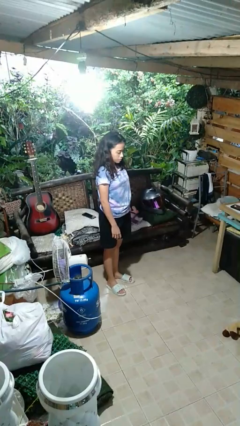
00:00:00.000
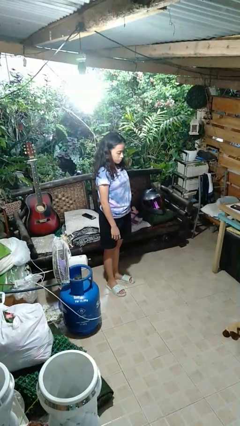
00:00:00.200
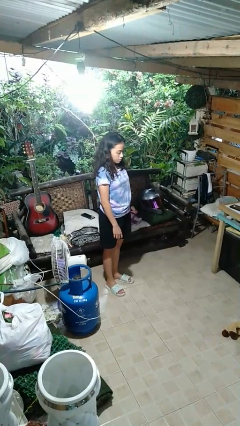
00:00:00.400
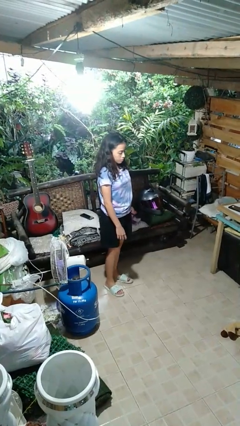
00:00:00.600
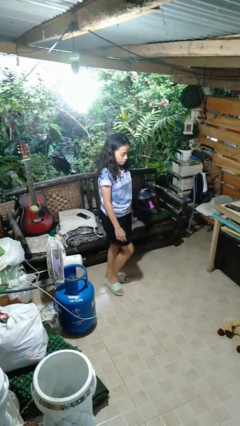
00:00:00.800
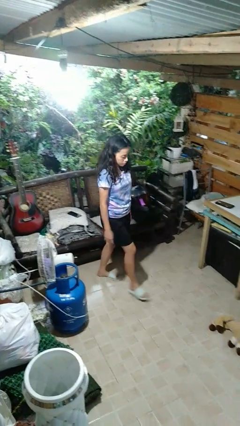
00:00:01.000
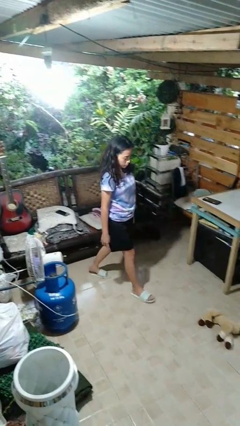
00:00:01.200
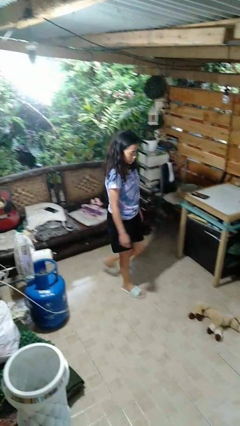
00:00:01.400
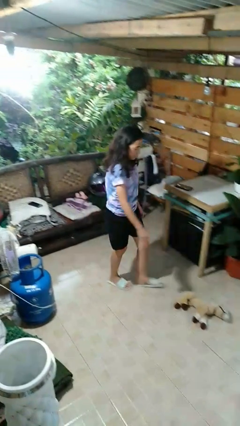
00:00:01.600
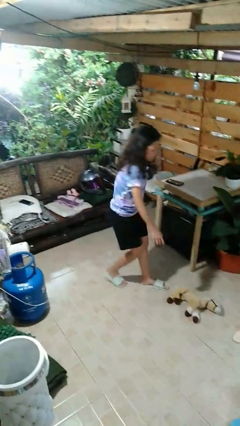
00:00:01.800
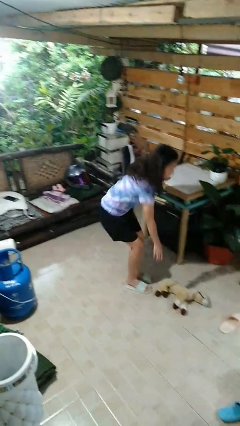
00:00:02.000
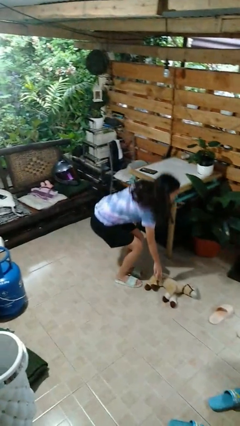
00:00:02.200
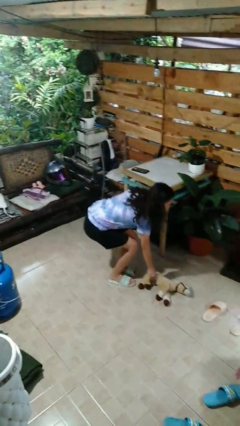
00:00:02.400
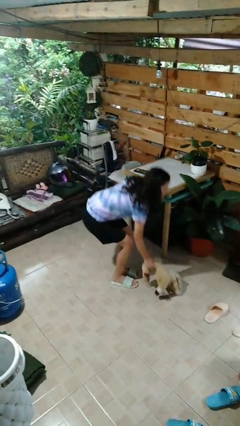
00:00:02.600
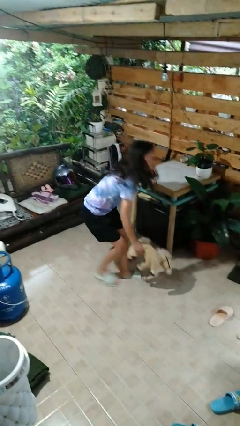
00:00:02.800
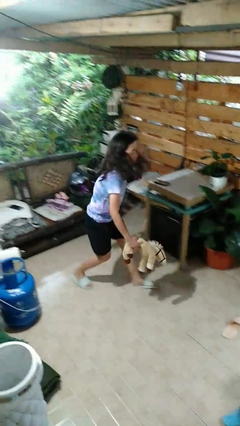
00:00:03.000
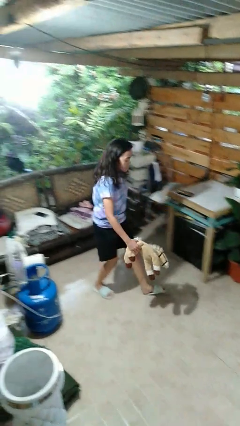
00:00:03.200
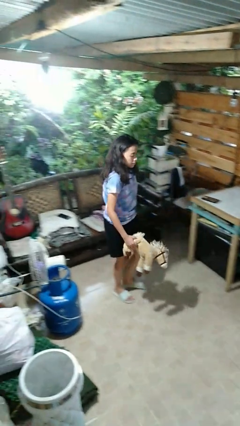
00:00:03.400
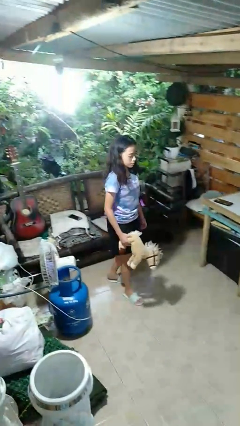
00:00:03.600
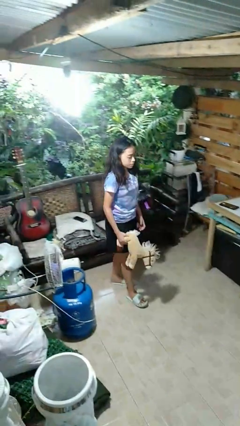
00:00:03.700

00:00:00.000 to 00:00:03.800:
person picks up object from floor

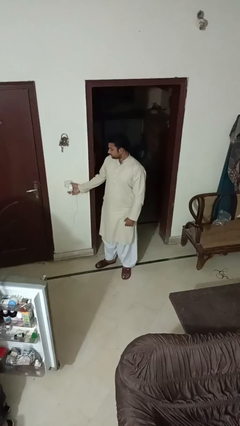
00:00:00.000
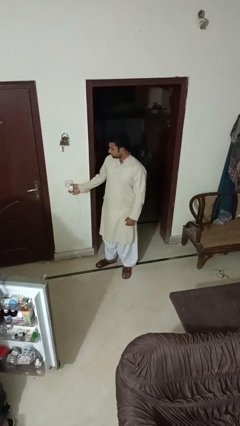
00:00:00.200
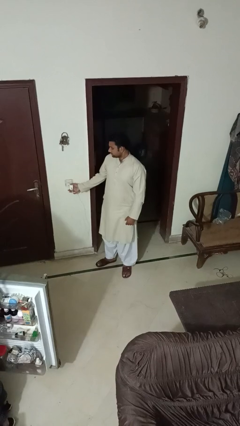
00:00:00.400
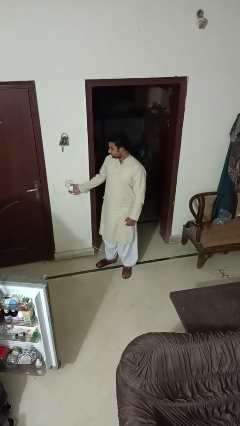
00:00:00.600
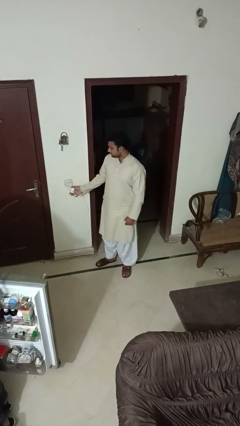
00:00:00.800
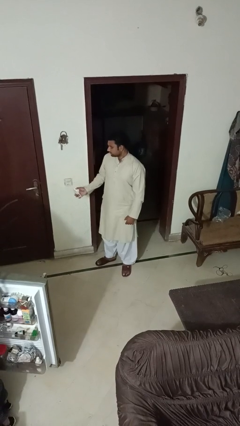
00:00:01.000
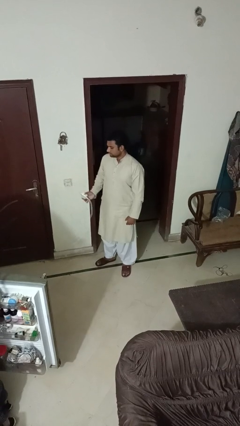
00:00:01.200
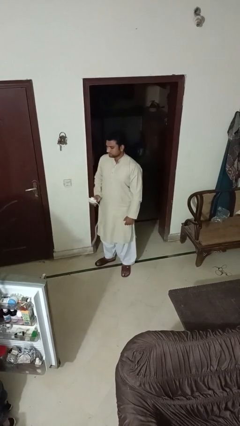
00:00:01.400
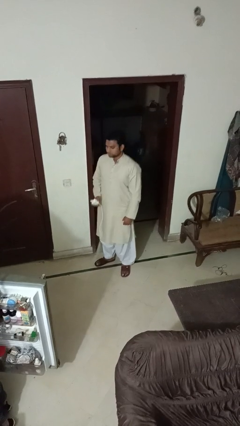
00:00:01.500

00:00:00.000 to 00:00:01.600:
person unplugs from electrical socket

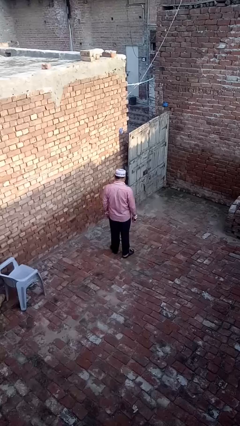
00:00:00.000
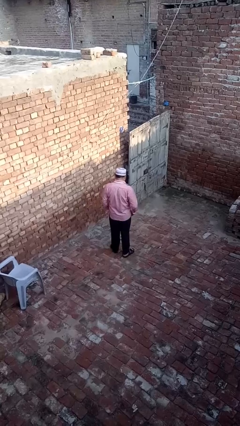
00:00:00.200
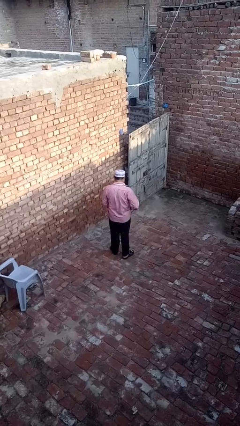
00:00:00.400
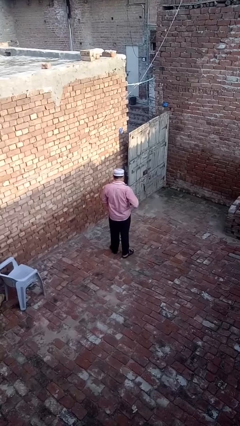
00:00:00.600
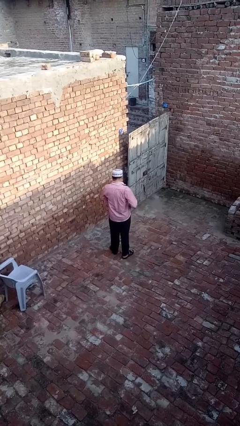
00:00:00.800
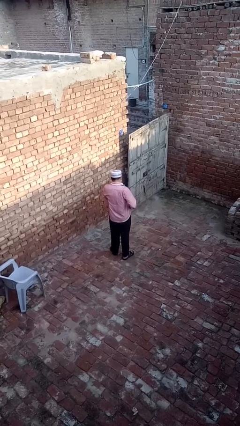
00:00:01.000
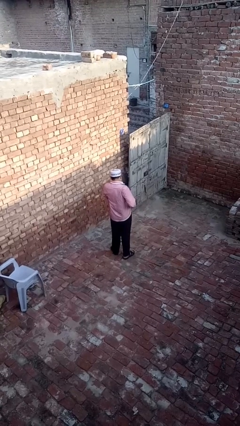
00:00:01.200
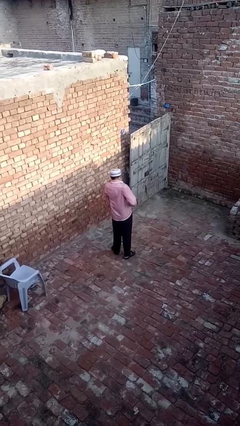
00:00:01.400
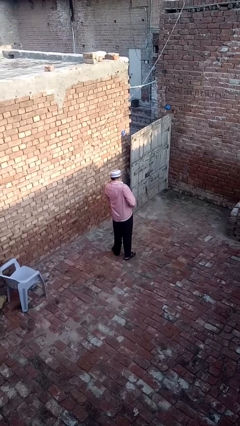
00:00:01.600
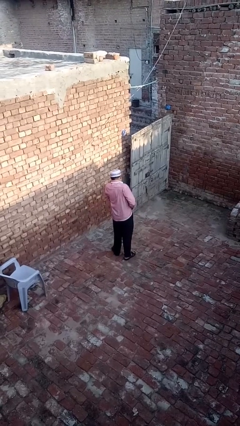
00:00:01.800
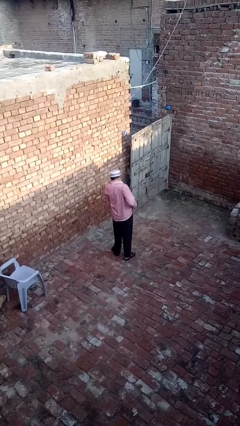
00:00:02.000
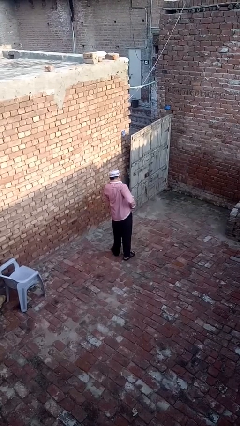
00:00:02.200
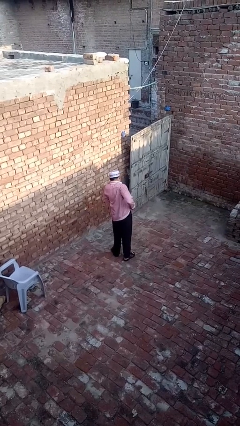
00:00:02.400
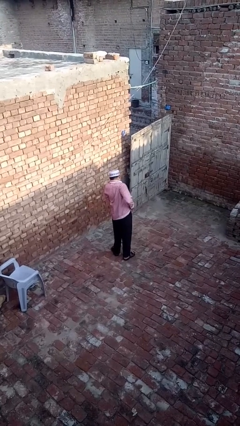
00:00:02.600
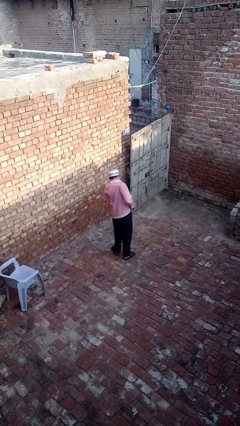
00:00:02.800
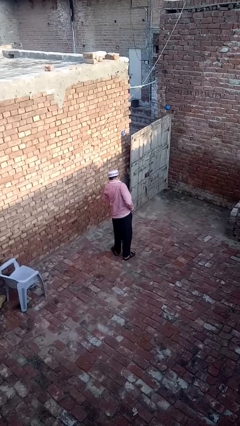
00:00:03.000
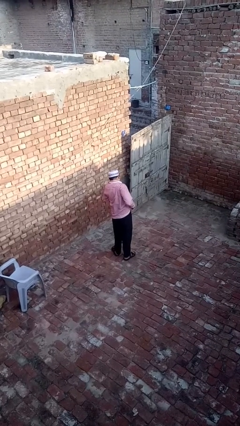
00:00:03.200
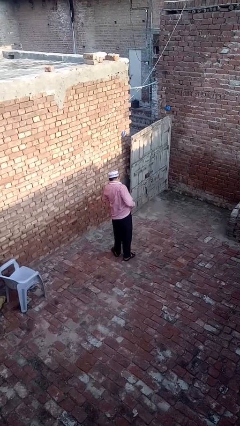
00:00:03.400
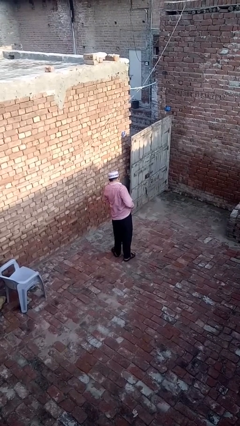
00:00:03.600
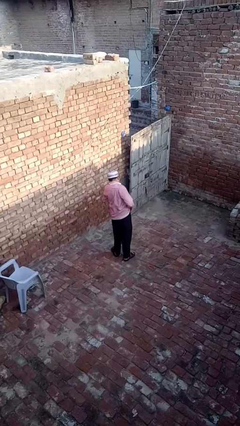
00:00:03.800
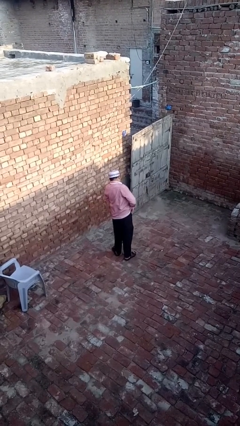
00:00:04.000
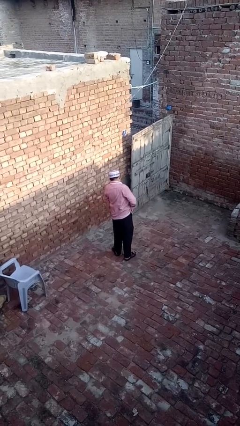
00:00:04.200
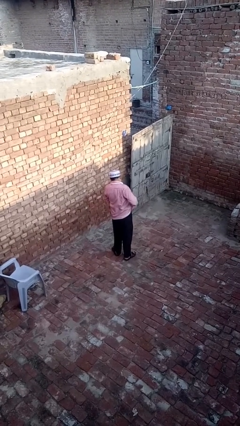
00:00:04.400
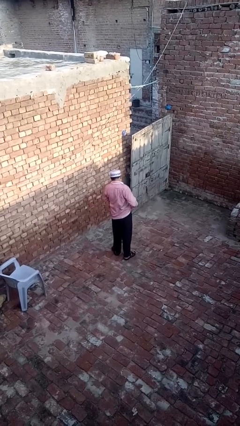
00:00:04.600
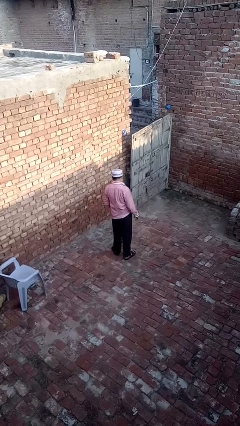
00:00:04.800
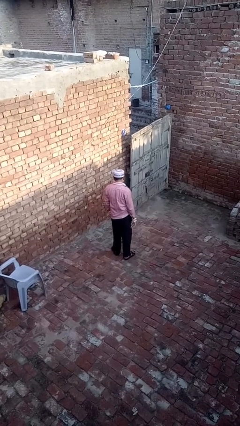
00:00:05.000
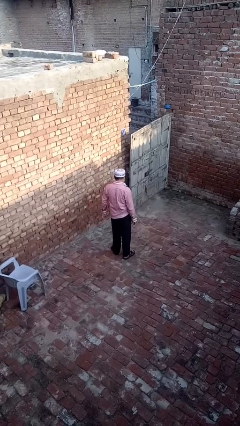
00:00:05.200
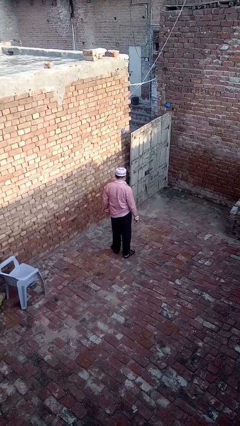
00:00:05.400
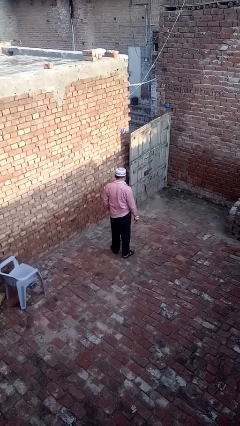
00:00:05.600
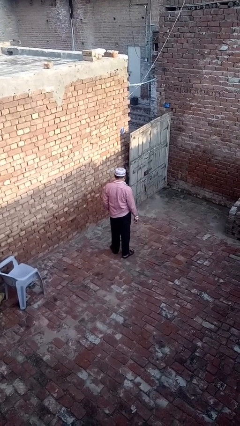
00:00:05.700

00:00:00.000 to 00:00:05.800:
person tucks in shirt

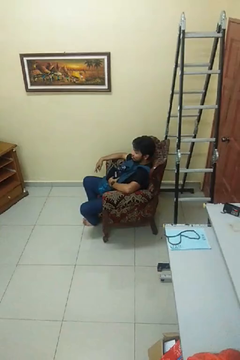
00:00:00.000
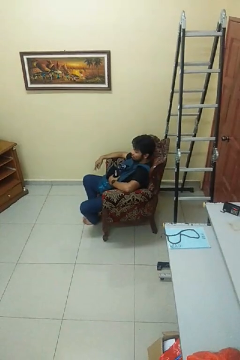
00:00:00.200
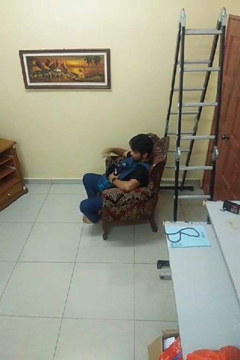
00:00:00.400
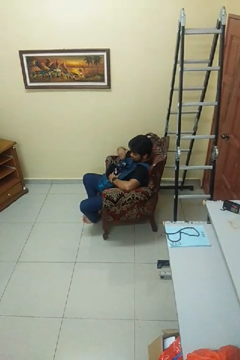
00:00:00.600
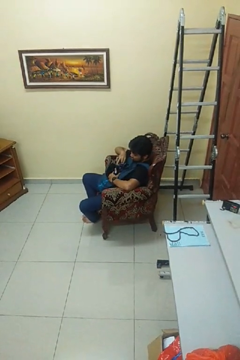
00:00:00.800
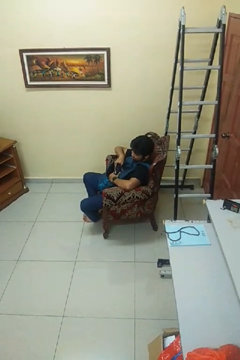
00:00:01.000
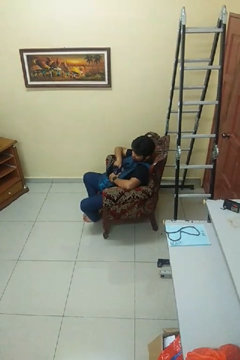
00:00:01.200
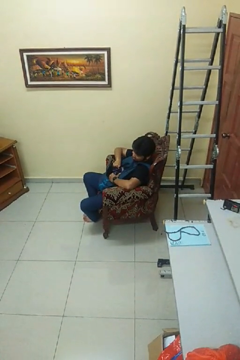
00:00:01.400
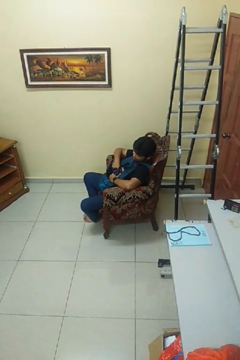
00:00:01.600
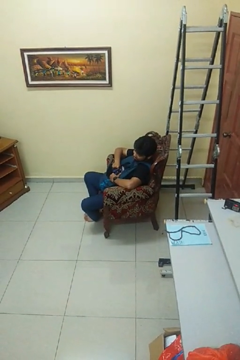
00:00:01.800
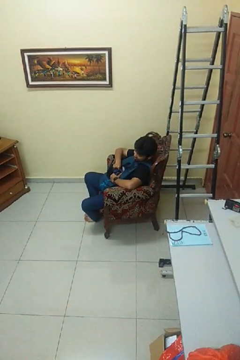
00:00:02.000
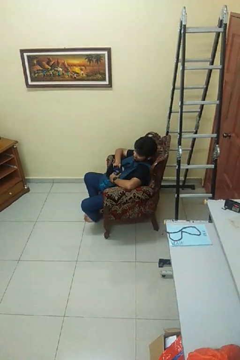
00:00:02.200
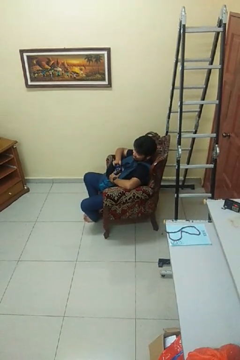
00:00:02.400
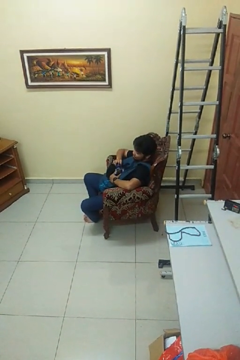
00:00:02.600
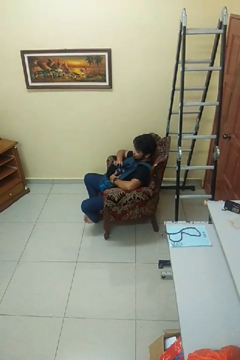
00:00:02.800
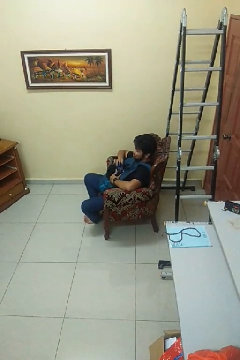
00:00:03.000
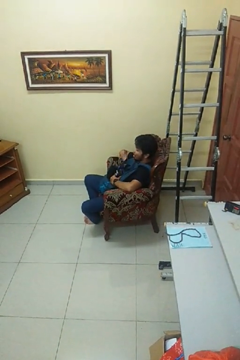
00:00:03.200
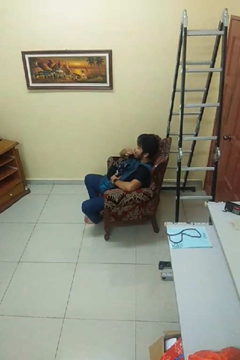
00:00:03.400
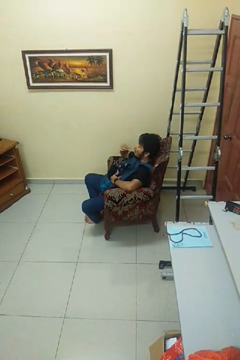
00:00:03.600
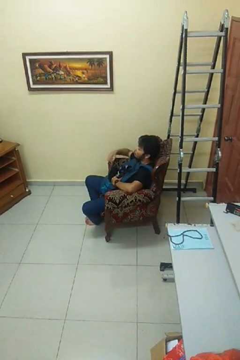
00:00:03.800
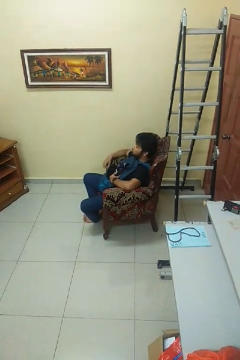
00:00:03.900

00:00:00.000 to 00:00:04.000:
person eats snack from bag

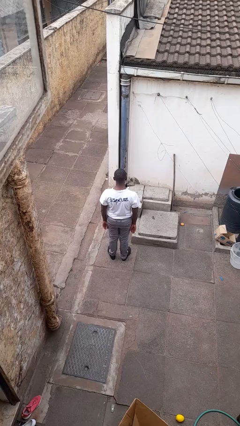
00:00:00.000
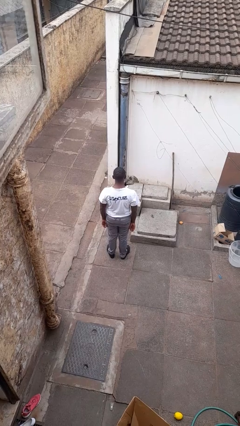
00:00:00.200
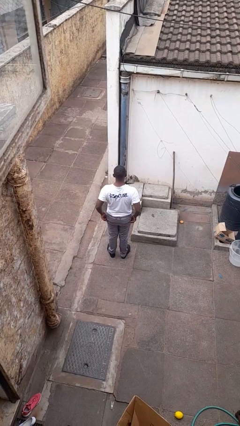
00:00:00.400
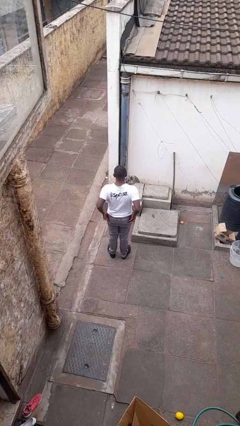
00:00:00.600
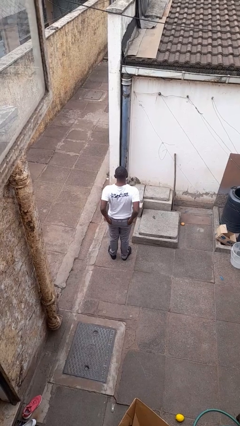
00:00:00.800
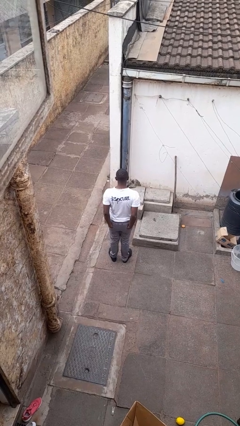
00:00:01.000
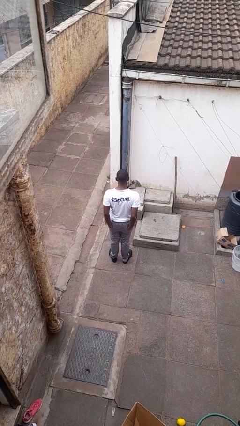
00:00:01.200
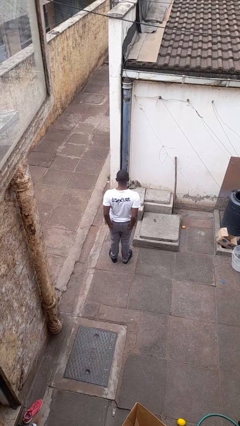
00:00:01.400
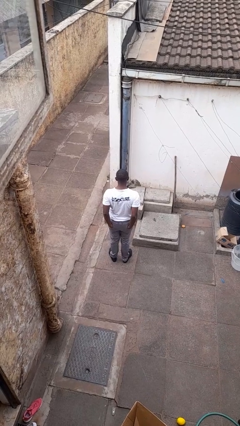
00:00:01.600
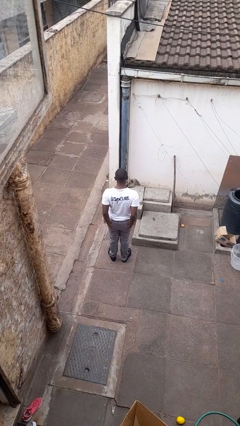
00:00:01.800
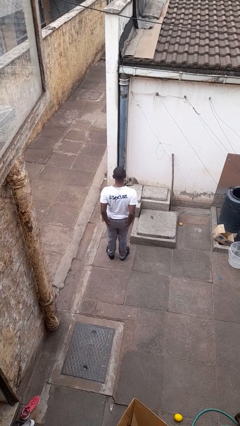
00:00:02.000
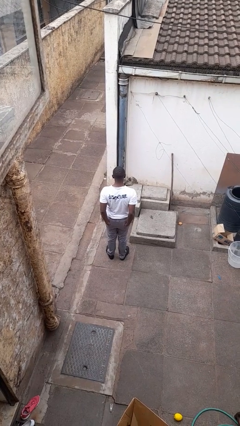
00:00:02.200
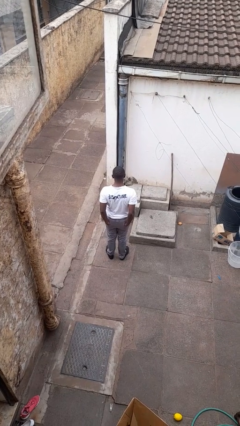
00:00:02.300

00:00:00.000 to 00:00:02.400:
person puts hands in back pockets

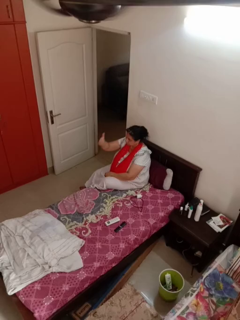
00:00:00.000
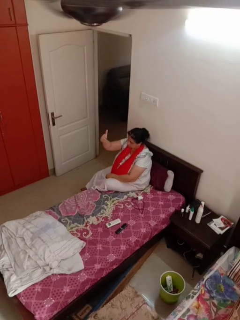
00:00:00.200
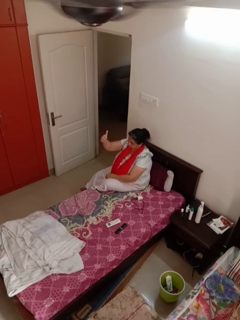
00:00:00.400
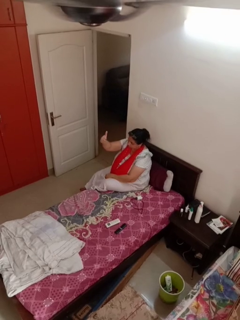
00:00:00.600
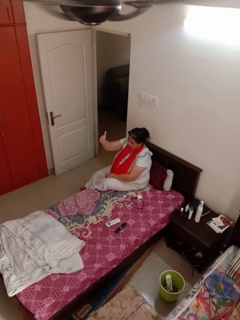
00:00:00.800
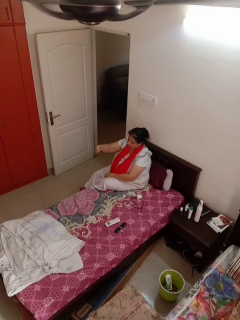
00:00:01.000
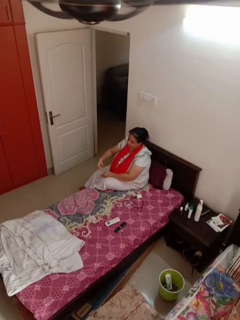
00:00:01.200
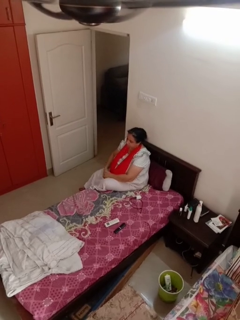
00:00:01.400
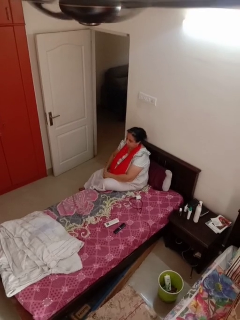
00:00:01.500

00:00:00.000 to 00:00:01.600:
person gestures thumbs up
